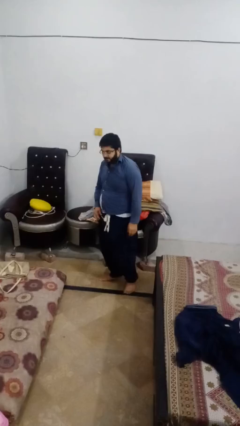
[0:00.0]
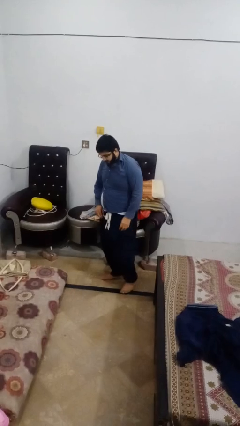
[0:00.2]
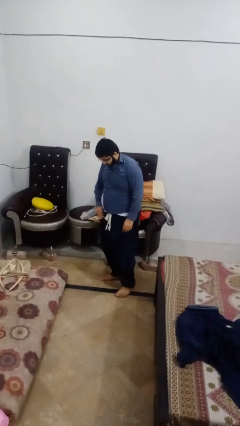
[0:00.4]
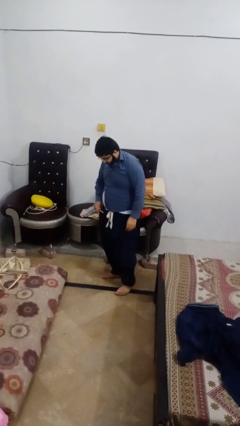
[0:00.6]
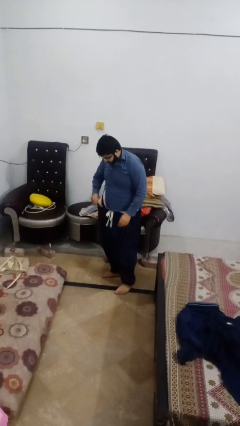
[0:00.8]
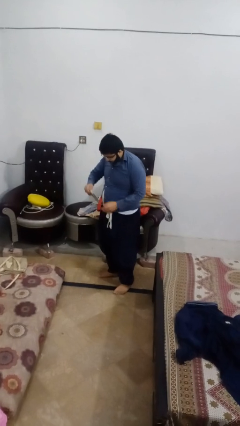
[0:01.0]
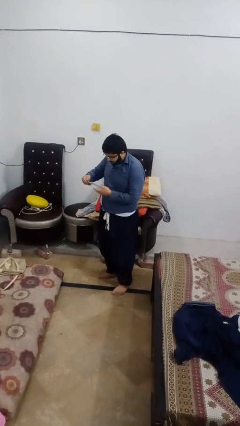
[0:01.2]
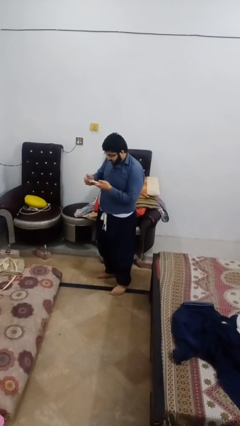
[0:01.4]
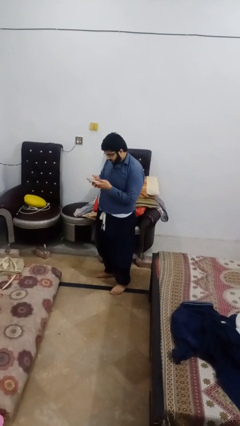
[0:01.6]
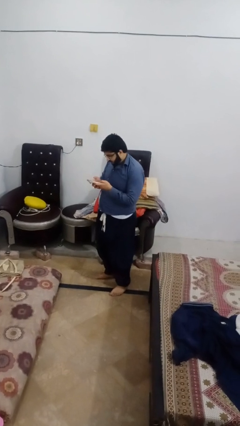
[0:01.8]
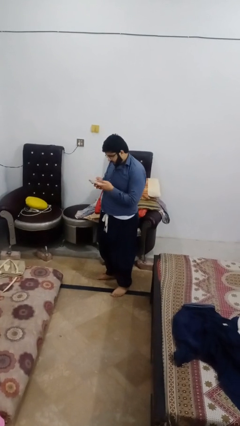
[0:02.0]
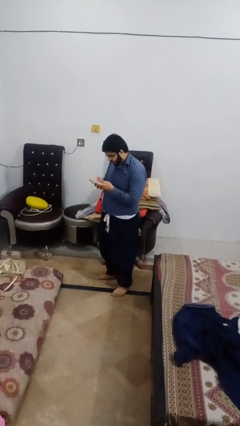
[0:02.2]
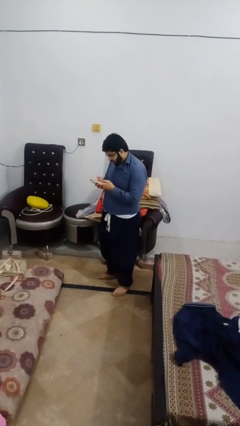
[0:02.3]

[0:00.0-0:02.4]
person takes phone from pocket

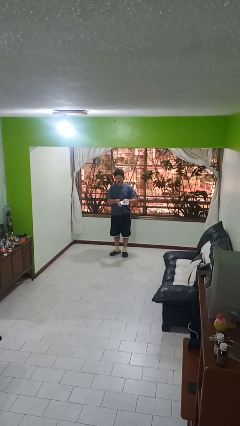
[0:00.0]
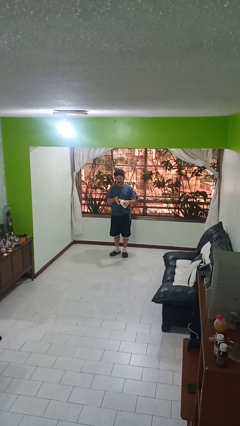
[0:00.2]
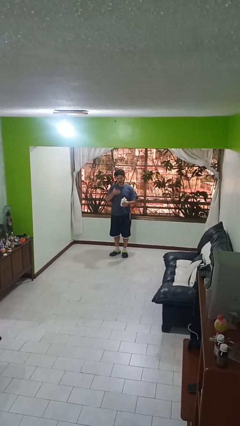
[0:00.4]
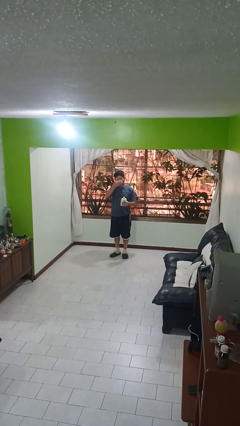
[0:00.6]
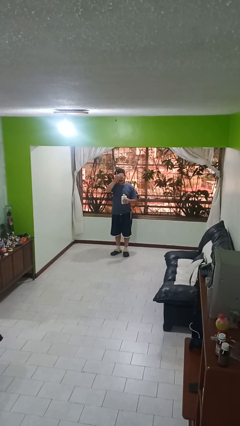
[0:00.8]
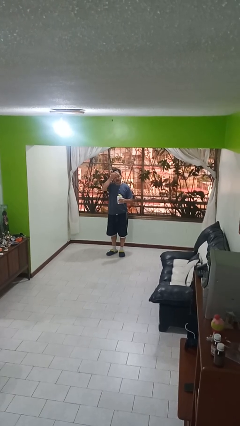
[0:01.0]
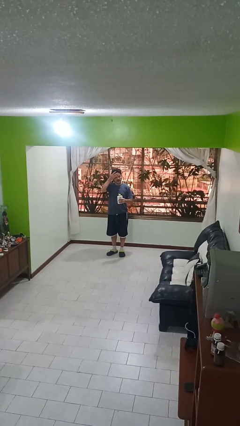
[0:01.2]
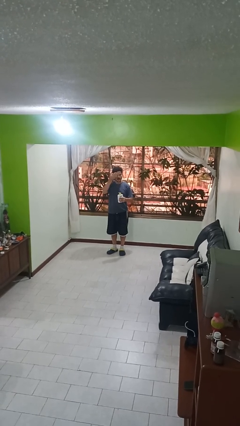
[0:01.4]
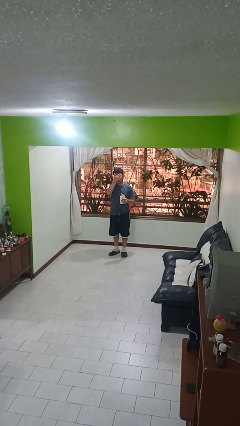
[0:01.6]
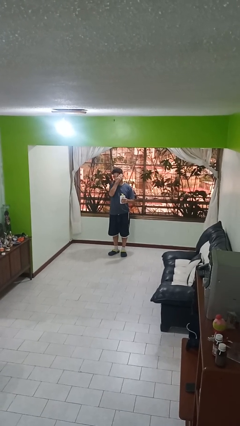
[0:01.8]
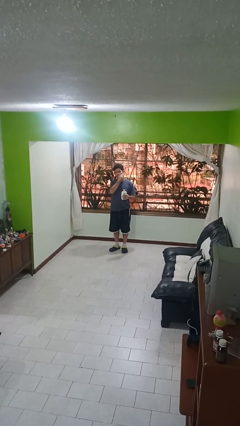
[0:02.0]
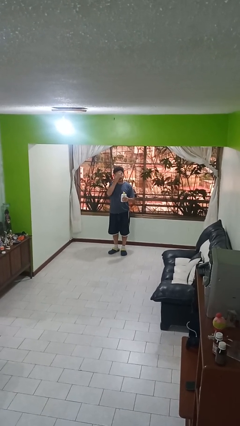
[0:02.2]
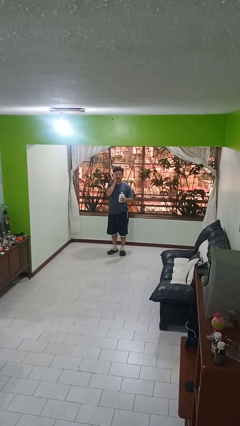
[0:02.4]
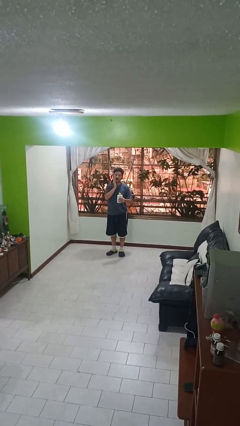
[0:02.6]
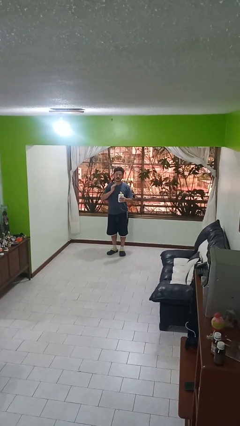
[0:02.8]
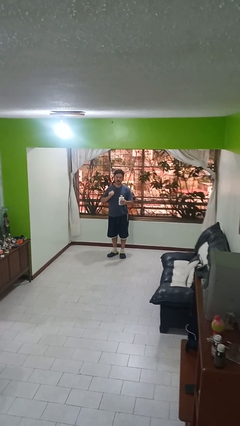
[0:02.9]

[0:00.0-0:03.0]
person applies facial moisturizer

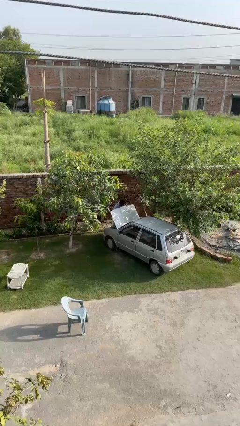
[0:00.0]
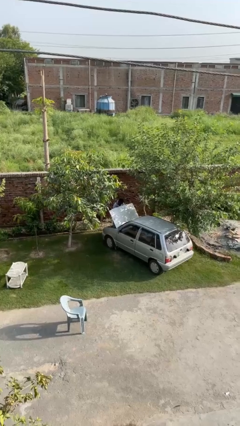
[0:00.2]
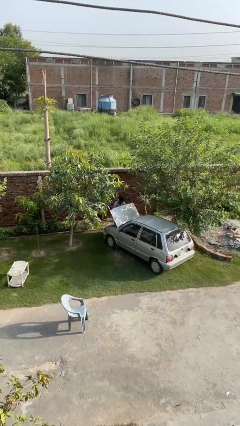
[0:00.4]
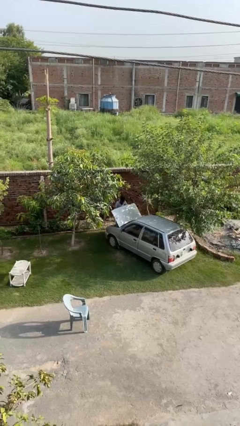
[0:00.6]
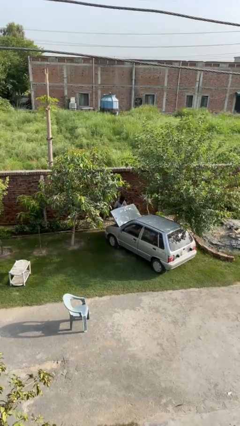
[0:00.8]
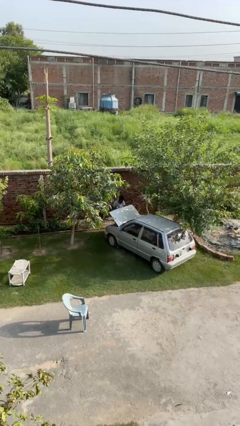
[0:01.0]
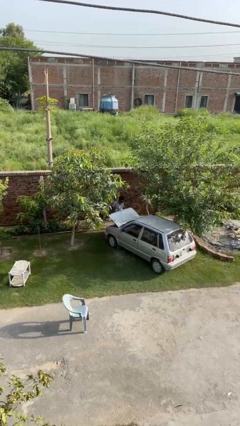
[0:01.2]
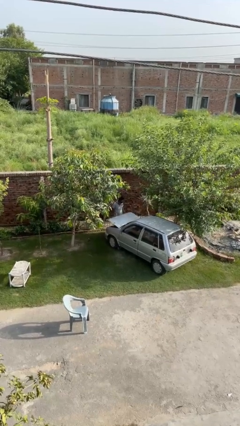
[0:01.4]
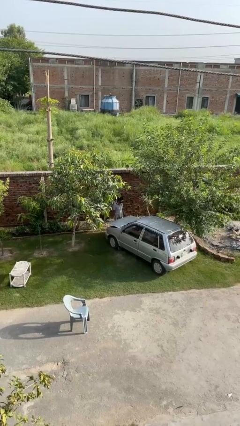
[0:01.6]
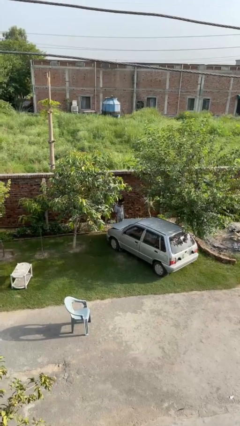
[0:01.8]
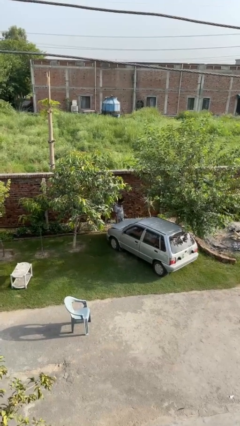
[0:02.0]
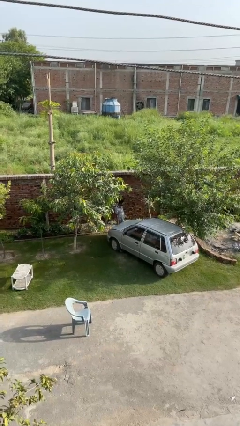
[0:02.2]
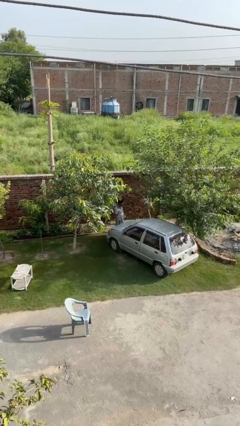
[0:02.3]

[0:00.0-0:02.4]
person closes car hood

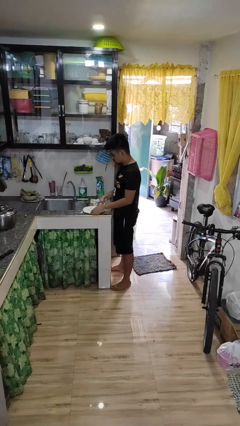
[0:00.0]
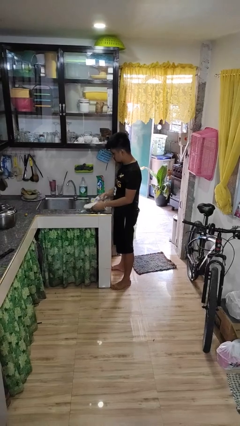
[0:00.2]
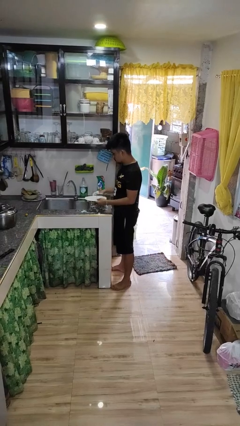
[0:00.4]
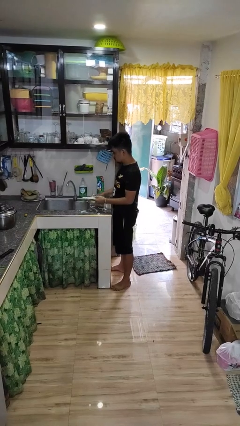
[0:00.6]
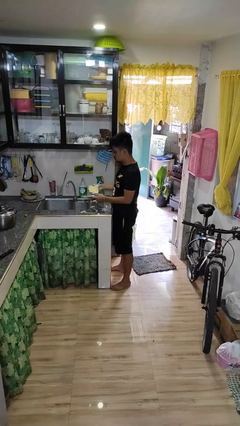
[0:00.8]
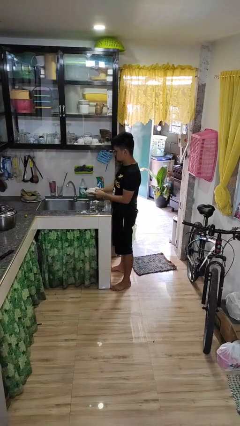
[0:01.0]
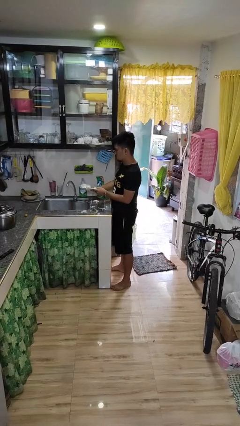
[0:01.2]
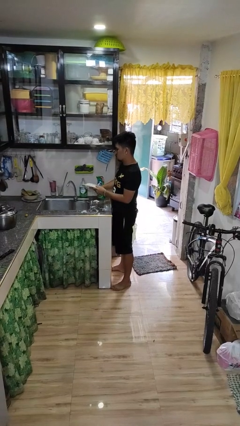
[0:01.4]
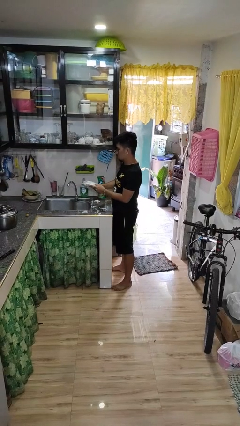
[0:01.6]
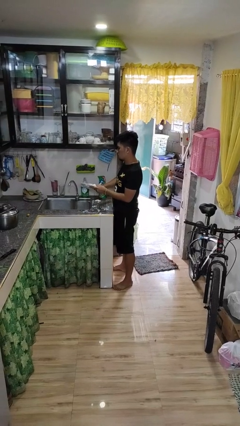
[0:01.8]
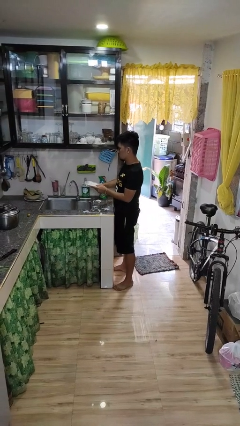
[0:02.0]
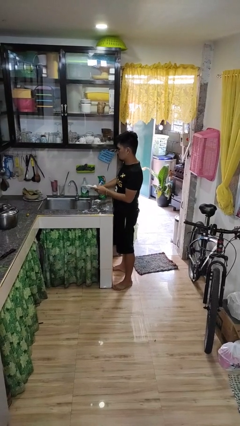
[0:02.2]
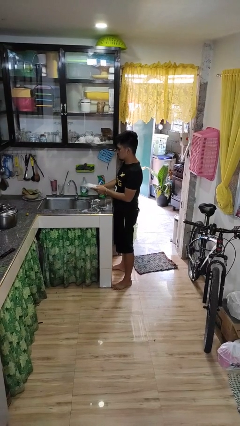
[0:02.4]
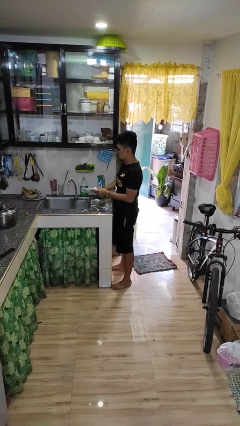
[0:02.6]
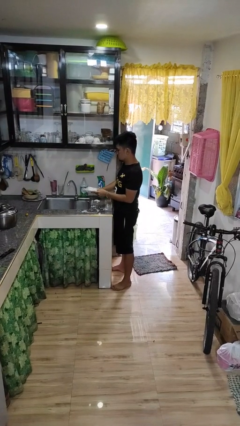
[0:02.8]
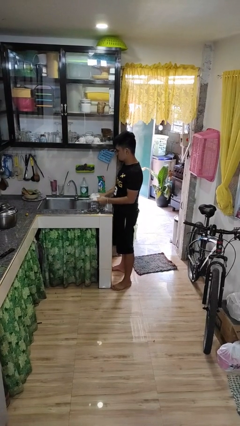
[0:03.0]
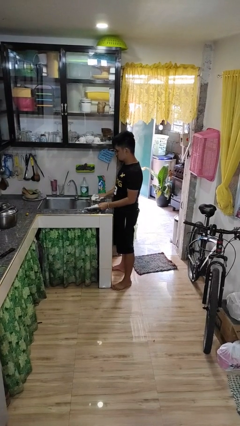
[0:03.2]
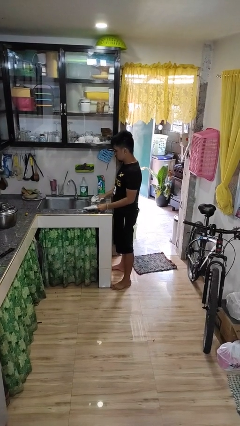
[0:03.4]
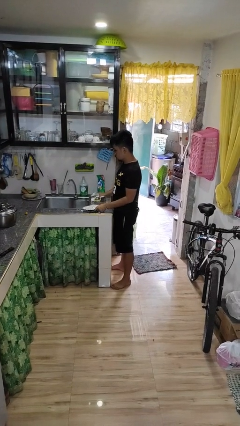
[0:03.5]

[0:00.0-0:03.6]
person washes dish

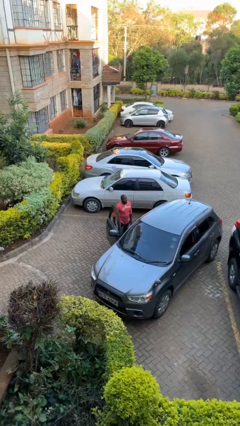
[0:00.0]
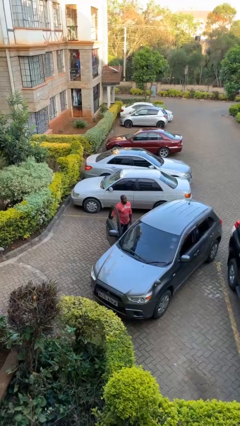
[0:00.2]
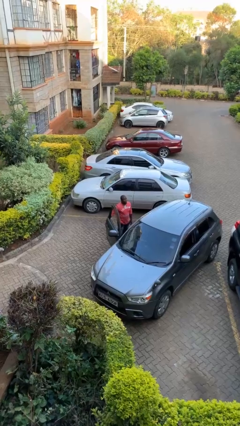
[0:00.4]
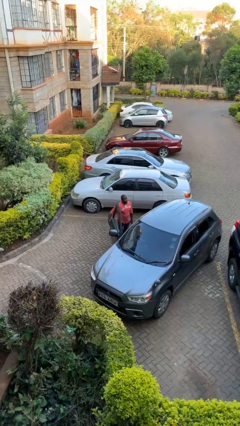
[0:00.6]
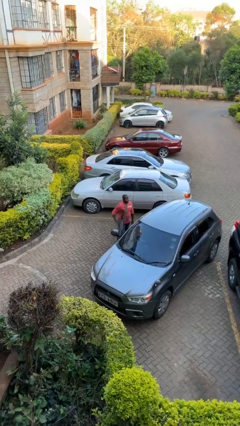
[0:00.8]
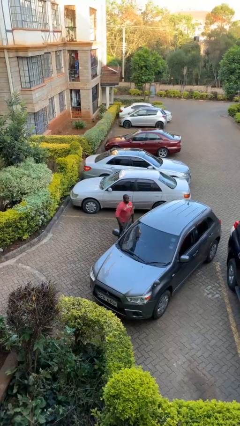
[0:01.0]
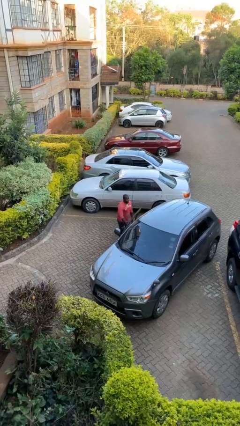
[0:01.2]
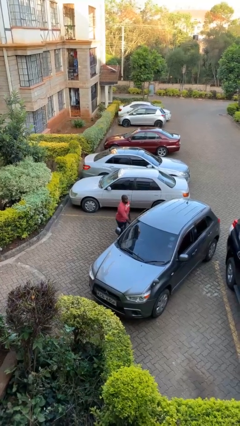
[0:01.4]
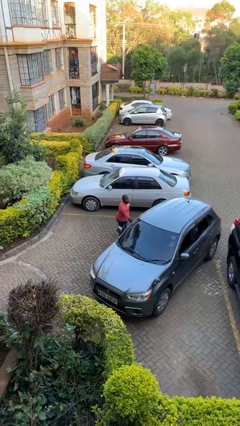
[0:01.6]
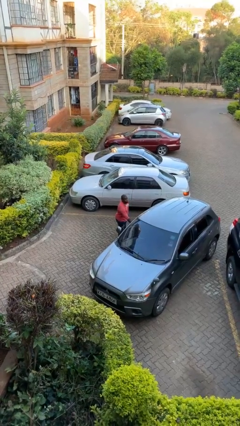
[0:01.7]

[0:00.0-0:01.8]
person closes car door

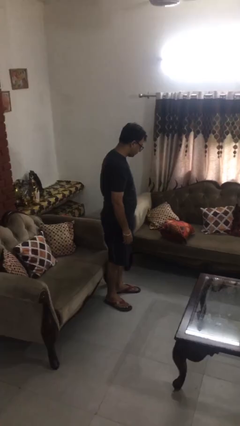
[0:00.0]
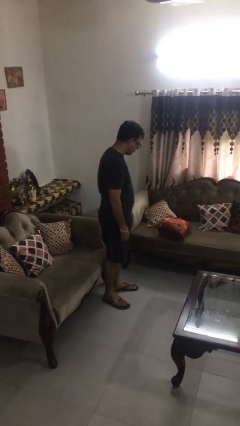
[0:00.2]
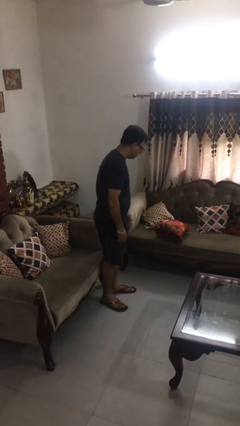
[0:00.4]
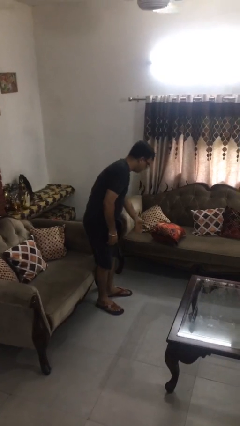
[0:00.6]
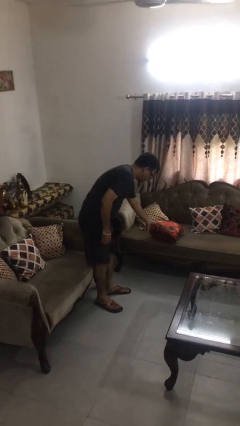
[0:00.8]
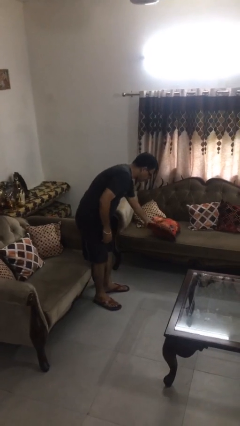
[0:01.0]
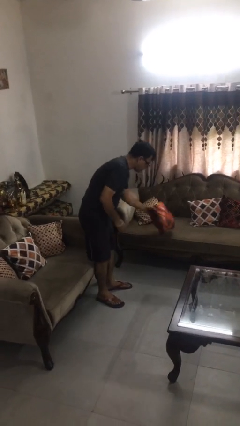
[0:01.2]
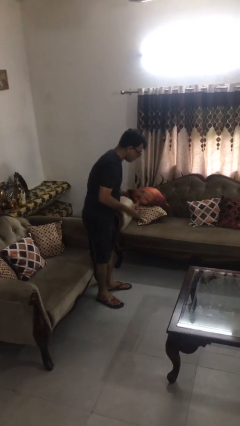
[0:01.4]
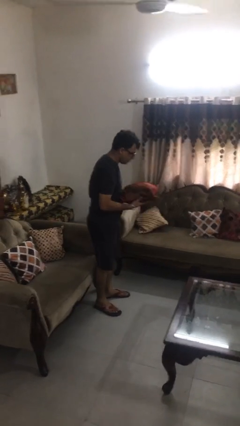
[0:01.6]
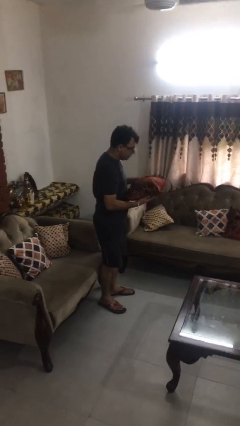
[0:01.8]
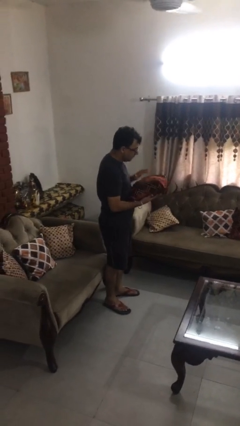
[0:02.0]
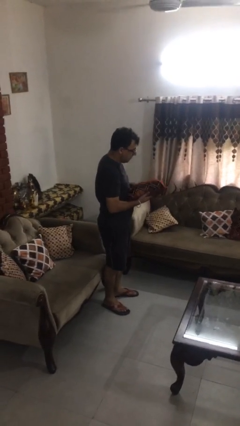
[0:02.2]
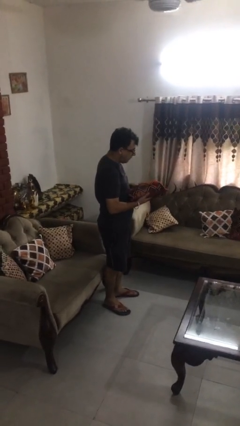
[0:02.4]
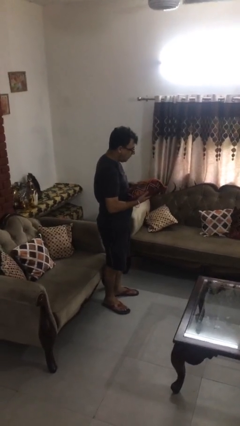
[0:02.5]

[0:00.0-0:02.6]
person picks up object from couch

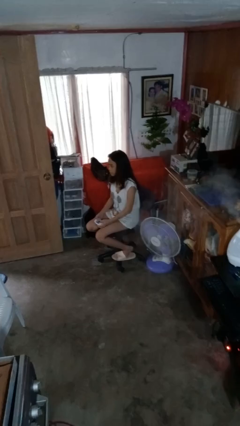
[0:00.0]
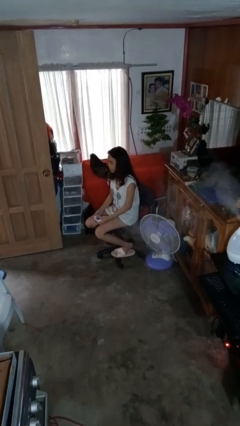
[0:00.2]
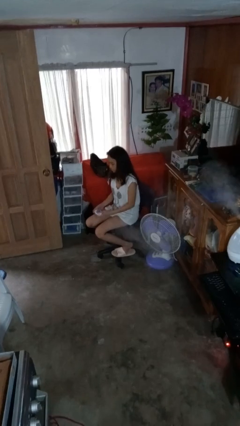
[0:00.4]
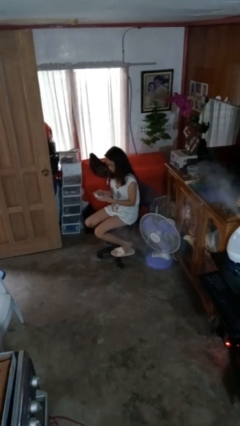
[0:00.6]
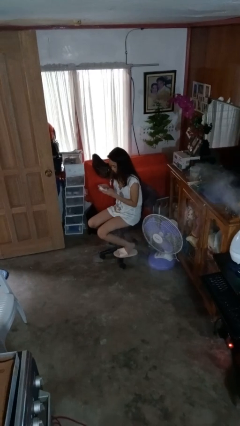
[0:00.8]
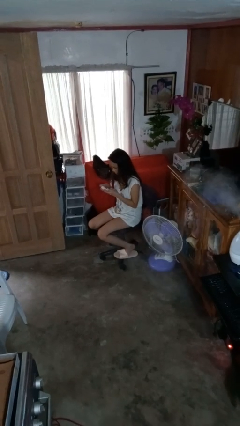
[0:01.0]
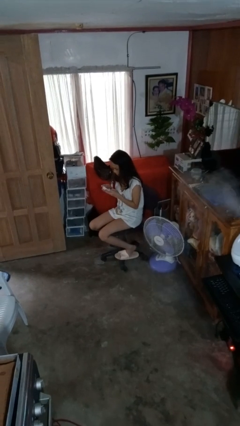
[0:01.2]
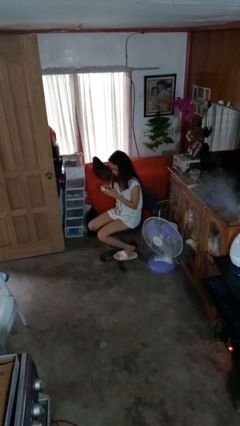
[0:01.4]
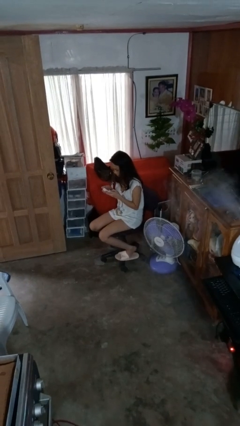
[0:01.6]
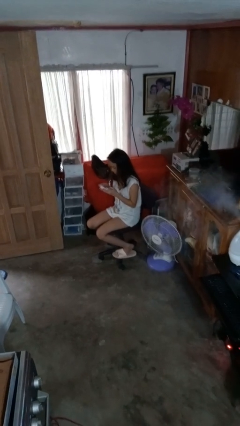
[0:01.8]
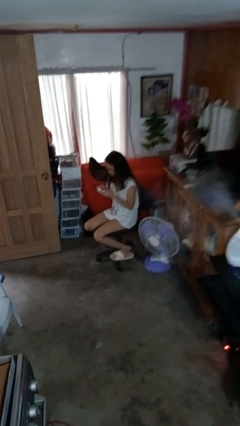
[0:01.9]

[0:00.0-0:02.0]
person interacts with handheld game
